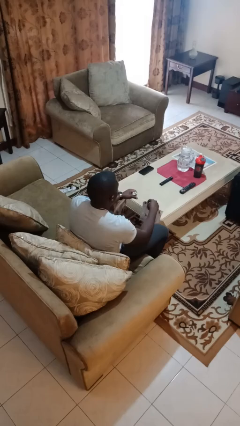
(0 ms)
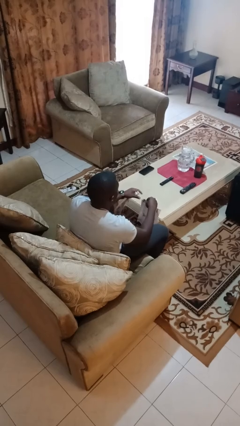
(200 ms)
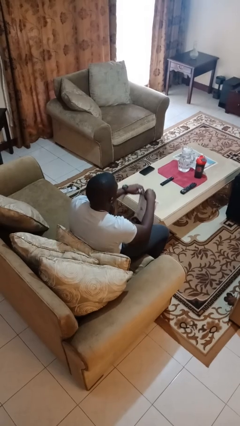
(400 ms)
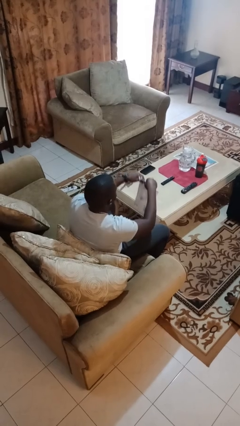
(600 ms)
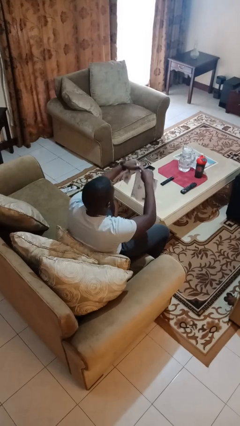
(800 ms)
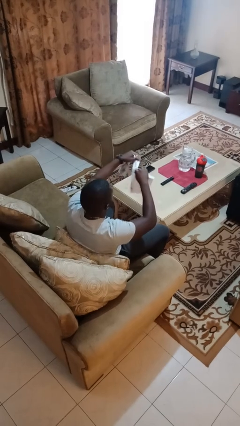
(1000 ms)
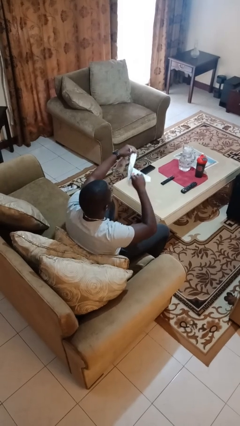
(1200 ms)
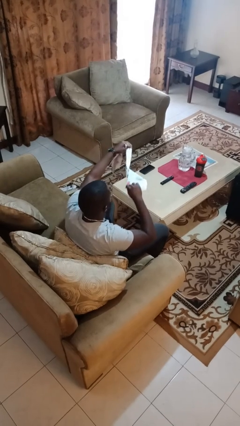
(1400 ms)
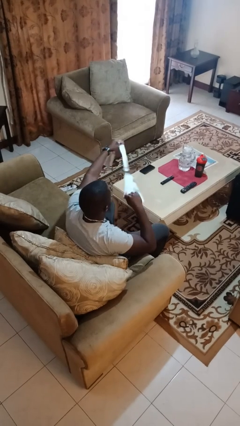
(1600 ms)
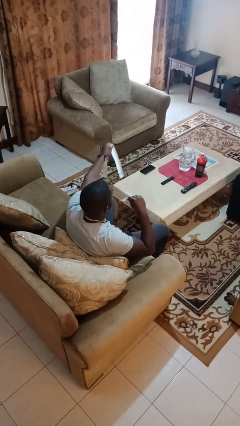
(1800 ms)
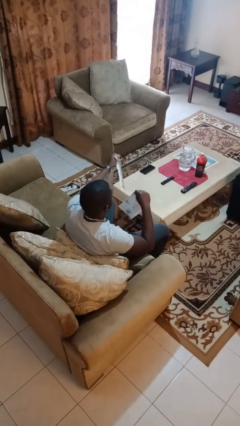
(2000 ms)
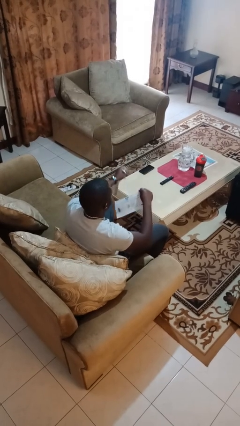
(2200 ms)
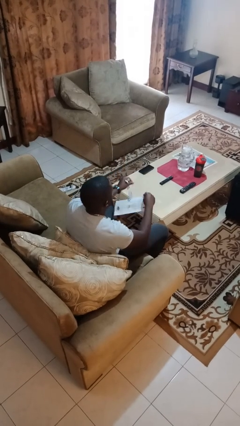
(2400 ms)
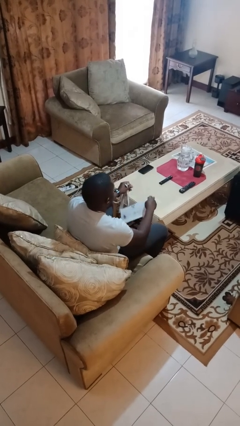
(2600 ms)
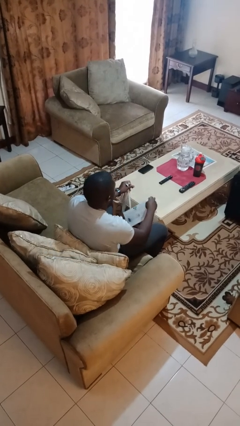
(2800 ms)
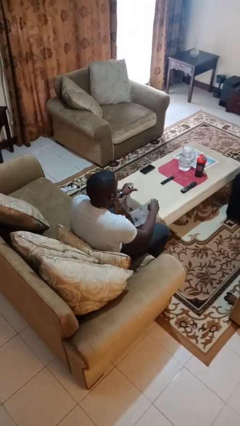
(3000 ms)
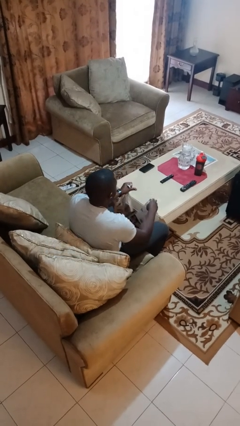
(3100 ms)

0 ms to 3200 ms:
person tears paper

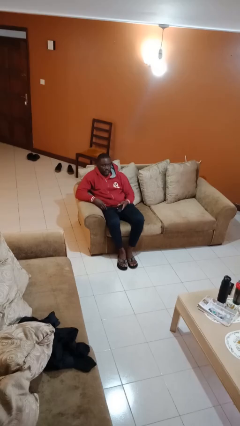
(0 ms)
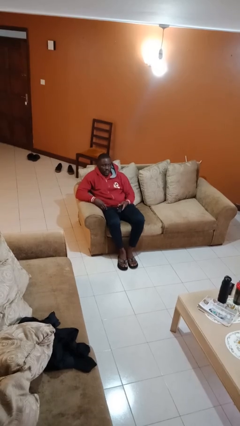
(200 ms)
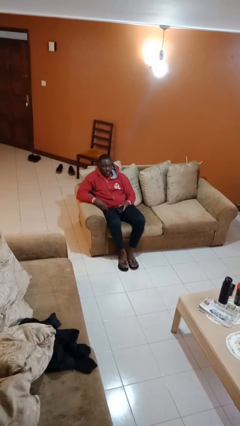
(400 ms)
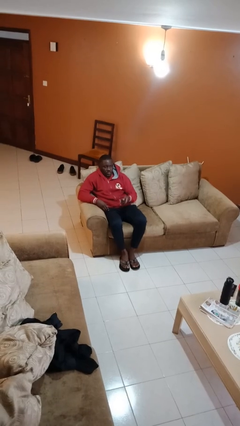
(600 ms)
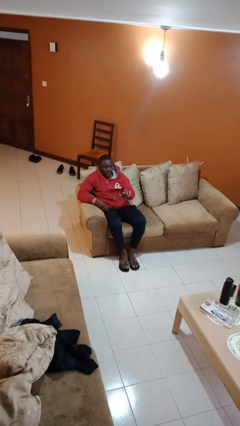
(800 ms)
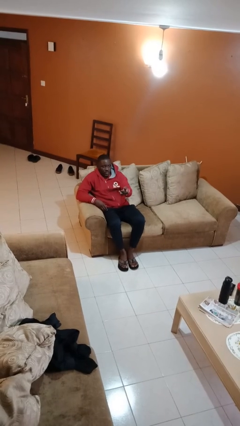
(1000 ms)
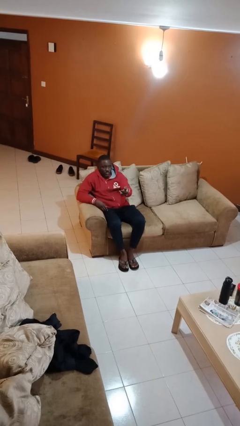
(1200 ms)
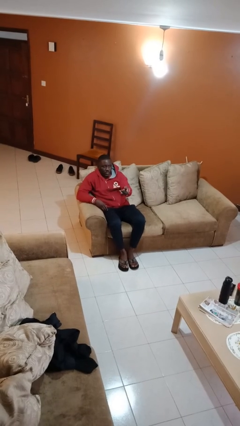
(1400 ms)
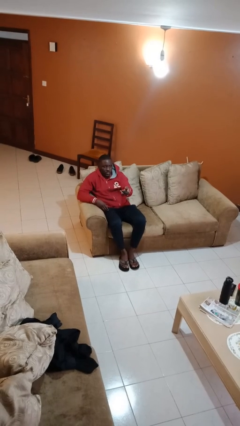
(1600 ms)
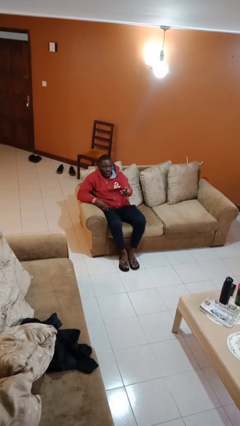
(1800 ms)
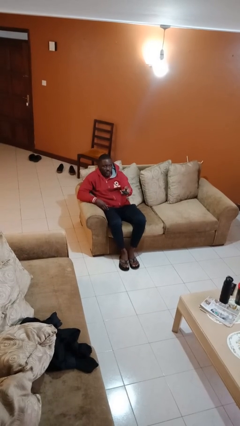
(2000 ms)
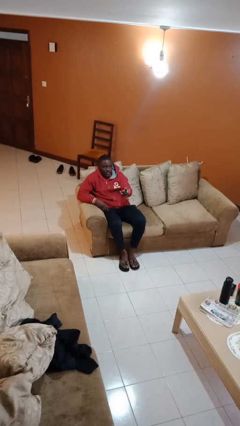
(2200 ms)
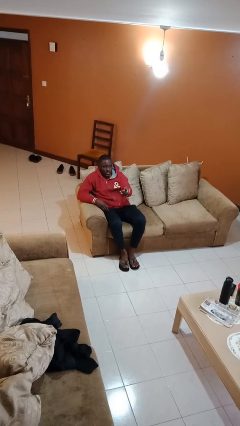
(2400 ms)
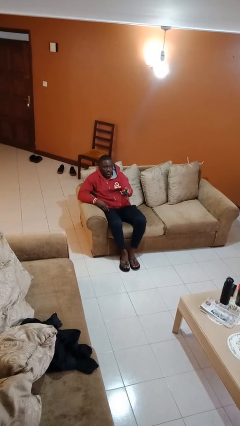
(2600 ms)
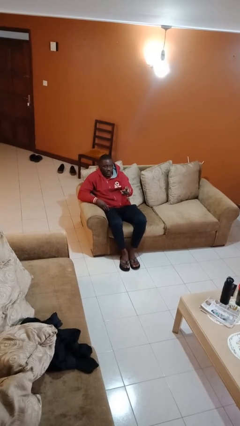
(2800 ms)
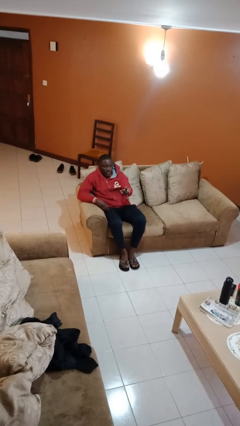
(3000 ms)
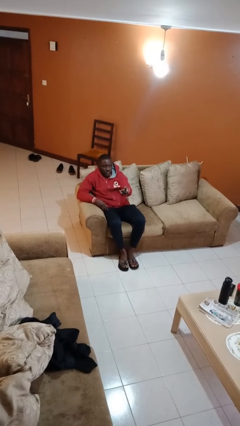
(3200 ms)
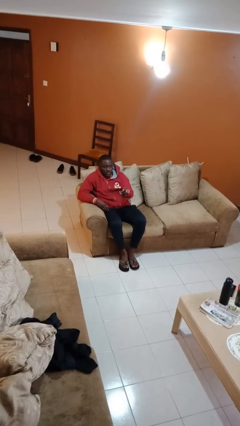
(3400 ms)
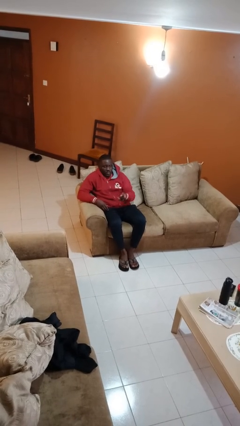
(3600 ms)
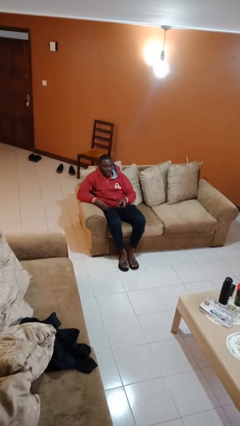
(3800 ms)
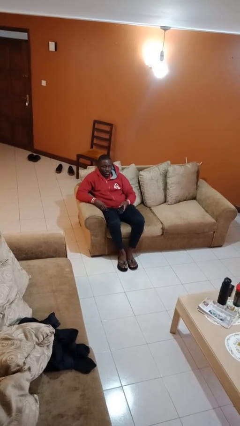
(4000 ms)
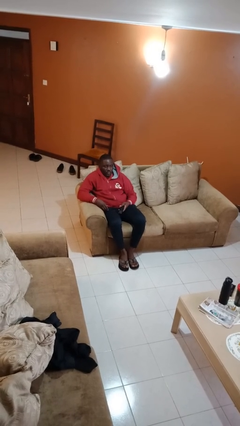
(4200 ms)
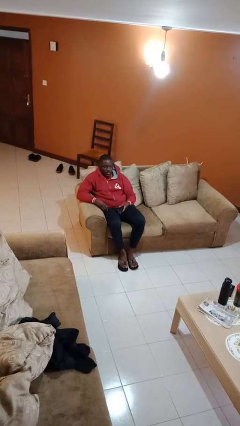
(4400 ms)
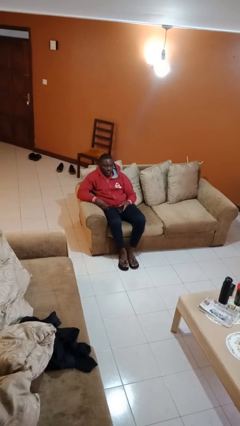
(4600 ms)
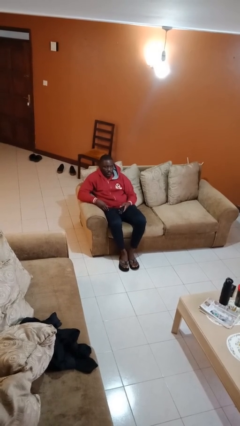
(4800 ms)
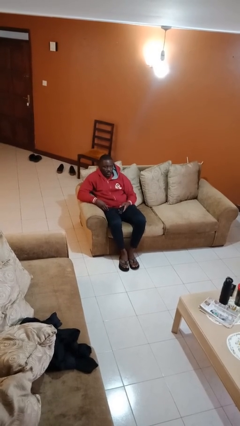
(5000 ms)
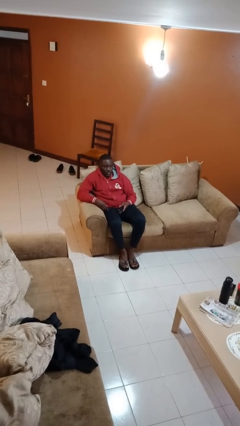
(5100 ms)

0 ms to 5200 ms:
person uses television remote

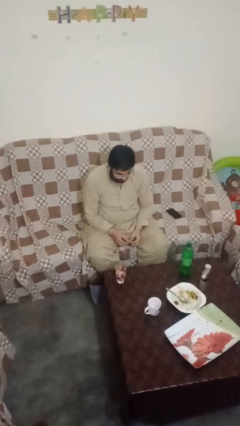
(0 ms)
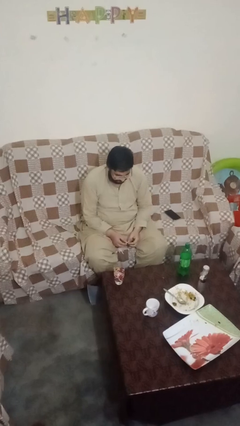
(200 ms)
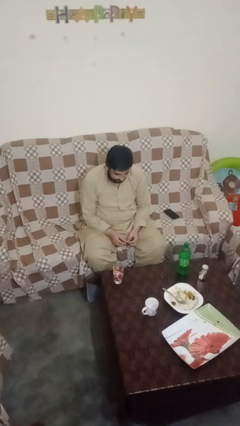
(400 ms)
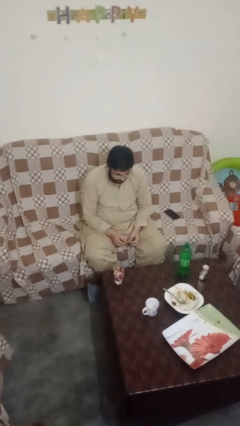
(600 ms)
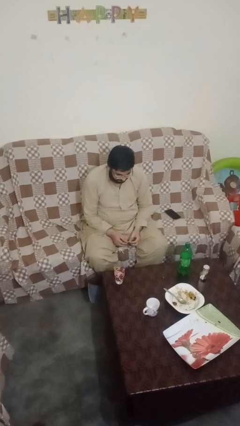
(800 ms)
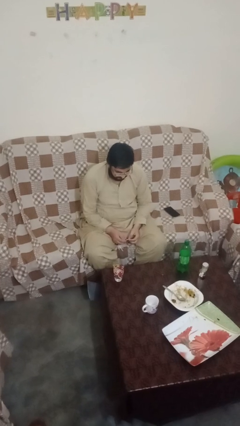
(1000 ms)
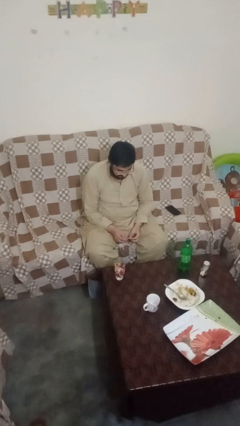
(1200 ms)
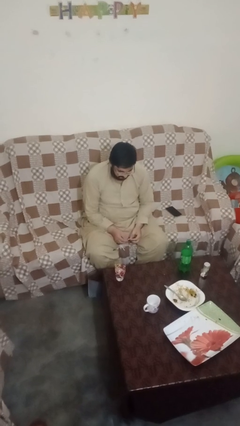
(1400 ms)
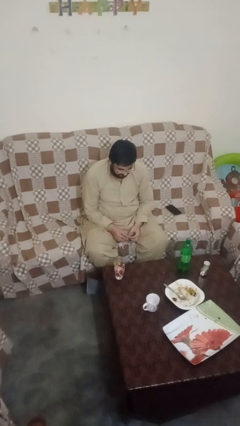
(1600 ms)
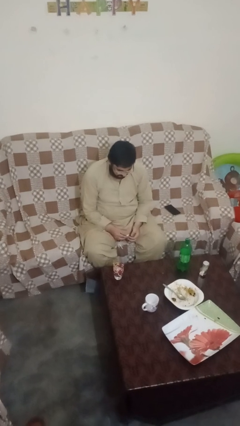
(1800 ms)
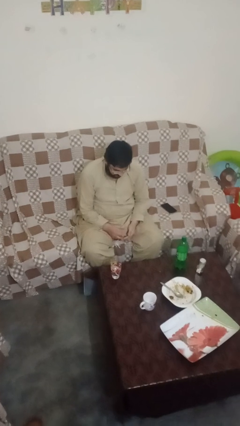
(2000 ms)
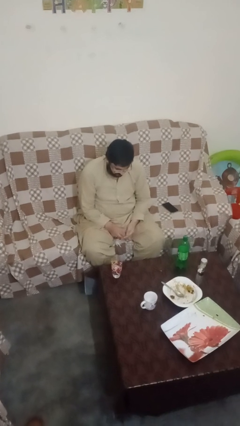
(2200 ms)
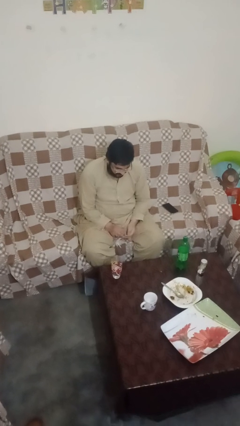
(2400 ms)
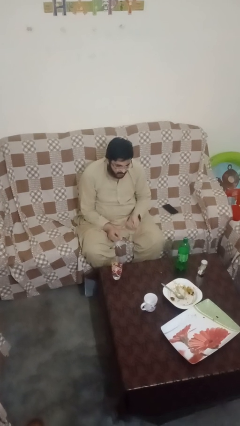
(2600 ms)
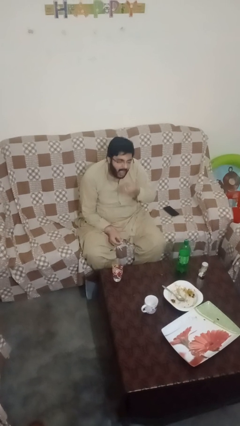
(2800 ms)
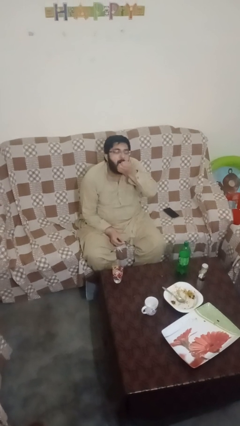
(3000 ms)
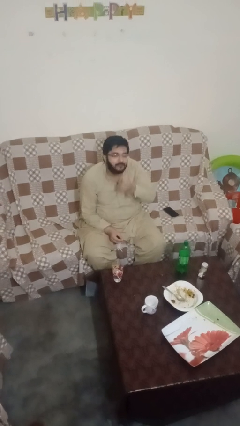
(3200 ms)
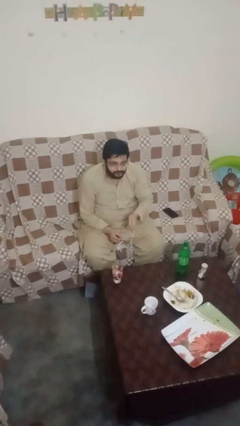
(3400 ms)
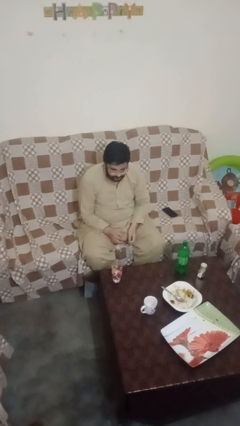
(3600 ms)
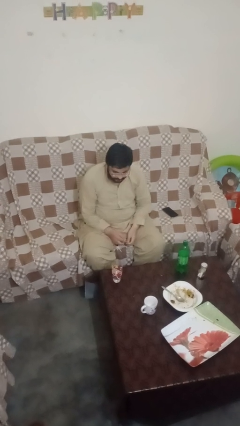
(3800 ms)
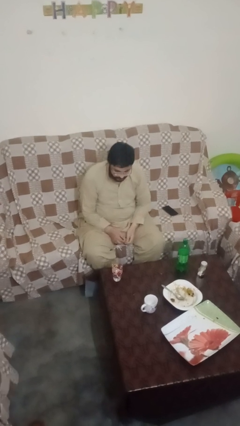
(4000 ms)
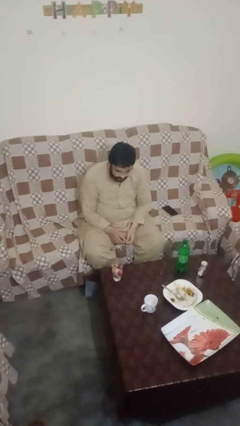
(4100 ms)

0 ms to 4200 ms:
person takes medicine pills

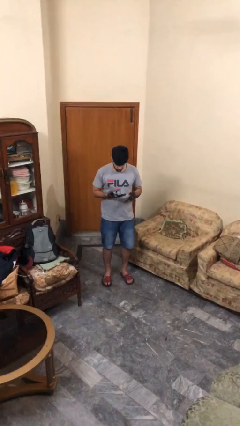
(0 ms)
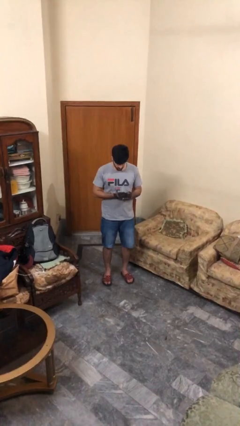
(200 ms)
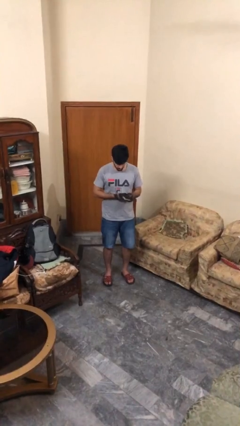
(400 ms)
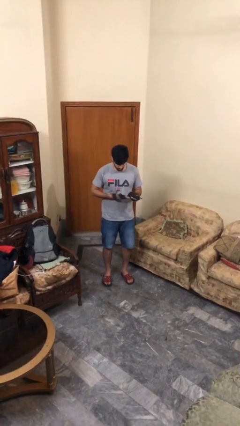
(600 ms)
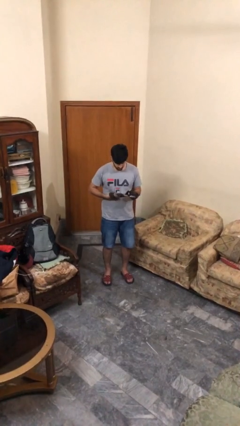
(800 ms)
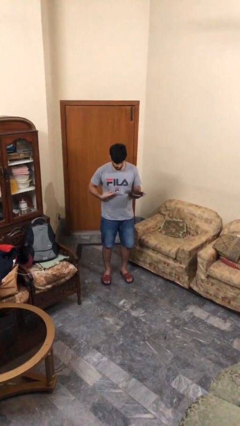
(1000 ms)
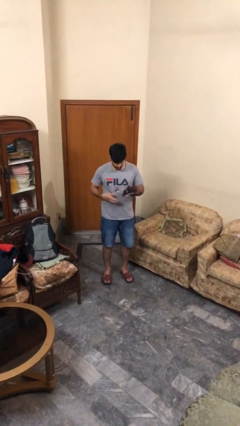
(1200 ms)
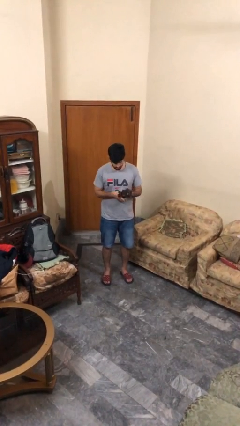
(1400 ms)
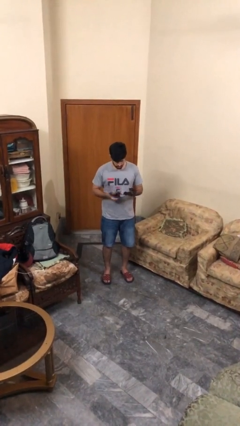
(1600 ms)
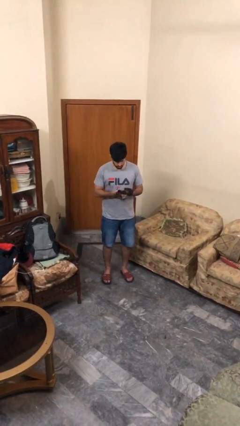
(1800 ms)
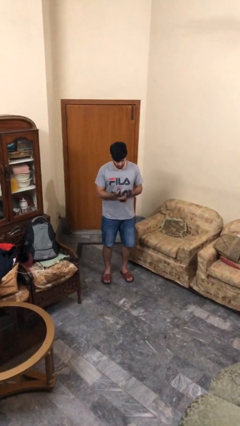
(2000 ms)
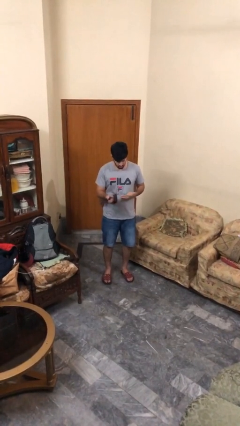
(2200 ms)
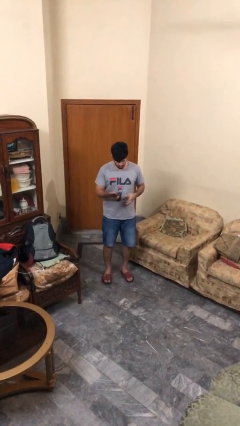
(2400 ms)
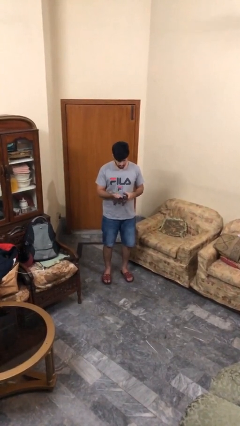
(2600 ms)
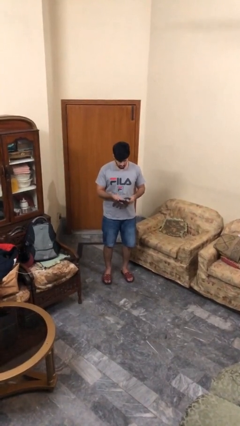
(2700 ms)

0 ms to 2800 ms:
person takes off gloves

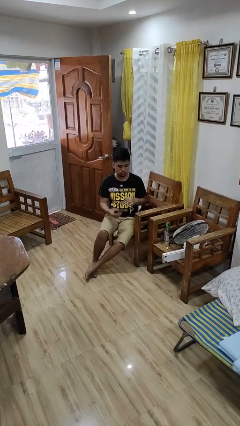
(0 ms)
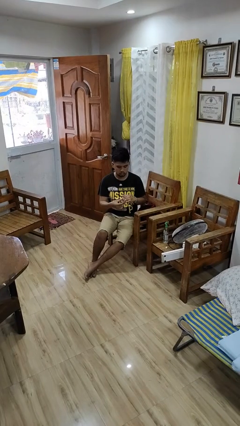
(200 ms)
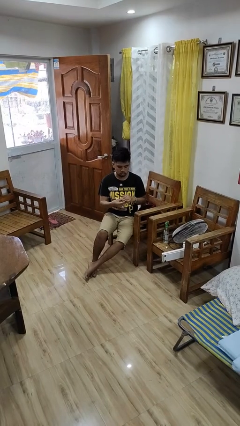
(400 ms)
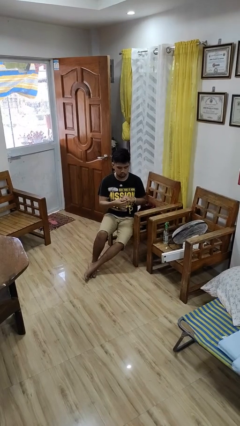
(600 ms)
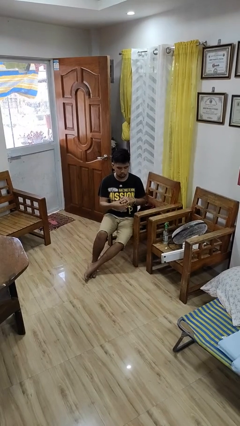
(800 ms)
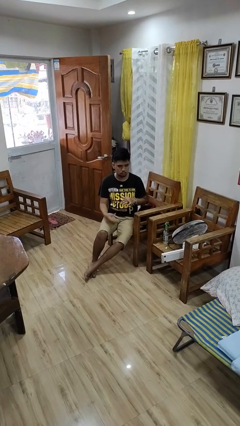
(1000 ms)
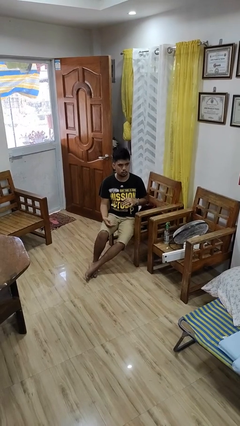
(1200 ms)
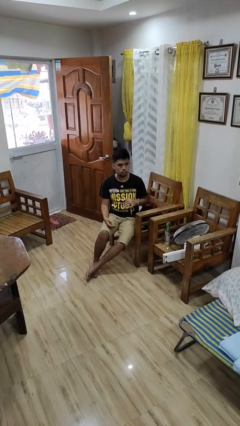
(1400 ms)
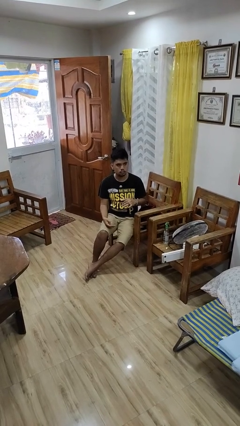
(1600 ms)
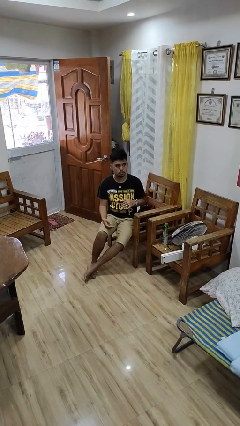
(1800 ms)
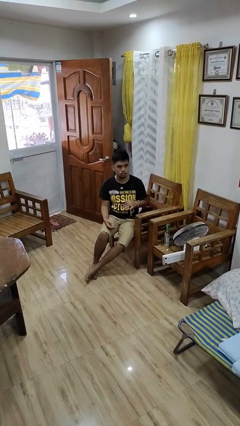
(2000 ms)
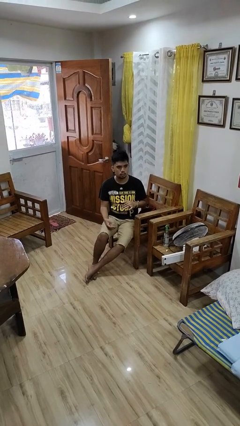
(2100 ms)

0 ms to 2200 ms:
person puts on ring

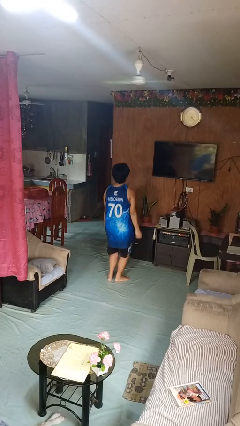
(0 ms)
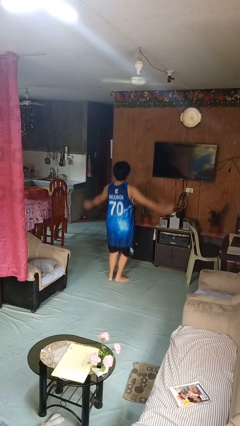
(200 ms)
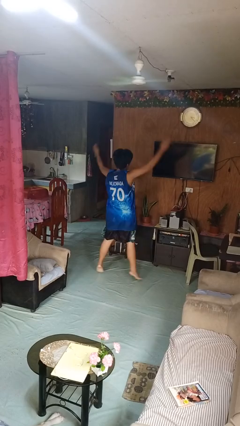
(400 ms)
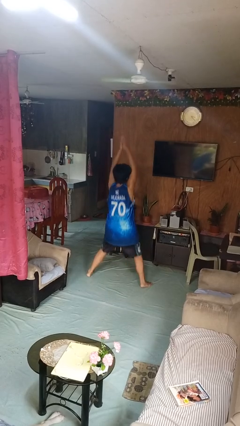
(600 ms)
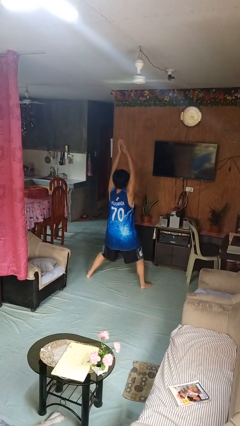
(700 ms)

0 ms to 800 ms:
person exercises with jumping jacks
